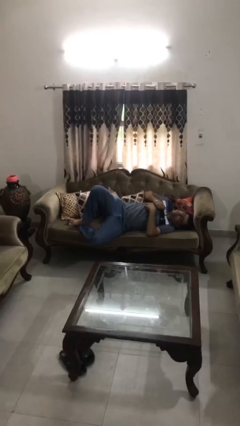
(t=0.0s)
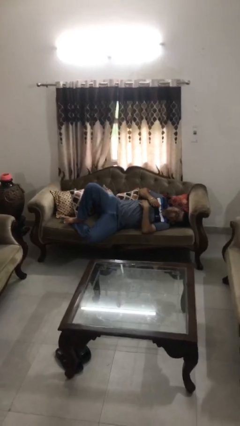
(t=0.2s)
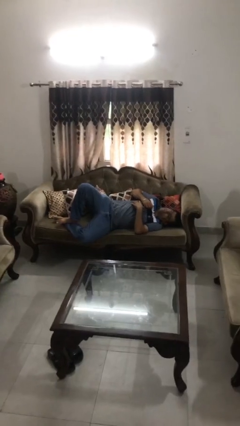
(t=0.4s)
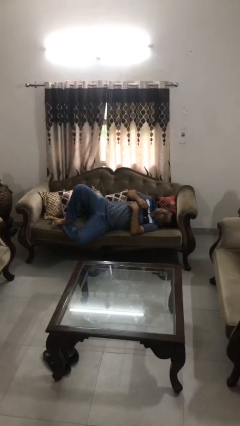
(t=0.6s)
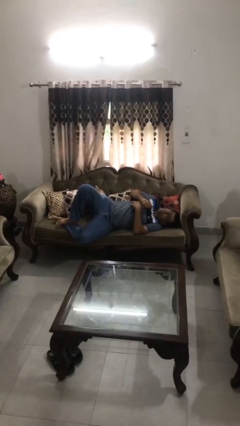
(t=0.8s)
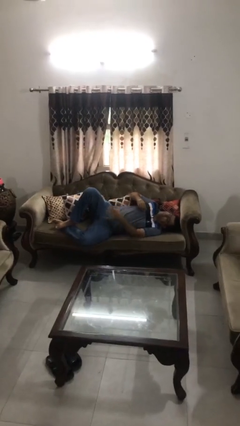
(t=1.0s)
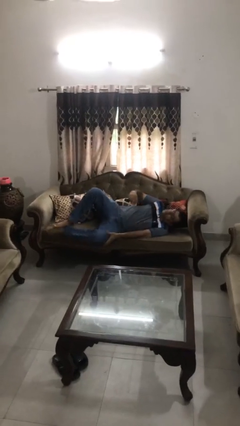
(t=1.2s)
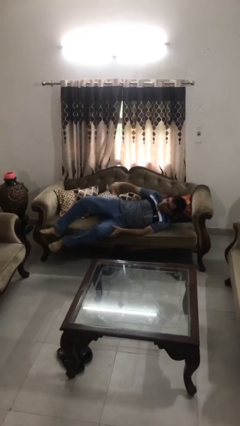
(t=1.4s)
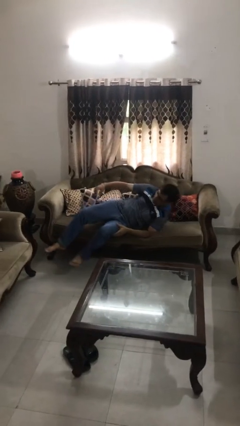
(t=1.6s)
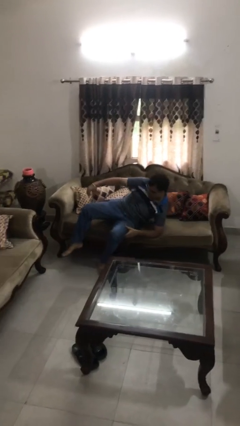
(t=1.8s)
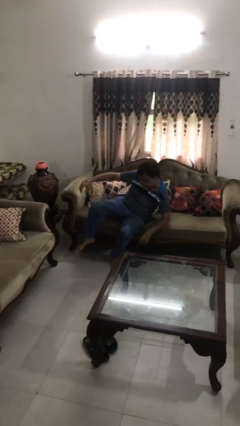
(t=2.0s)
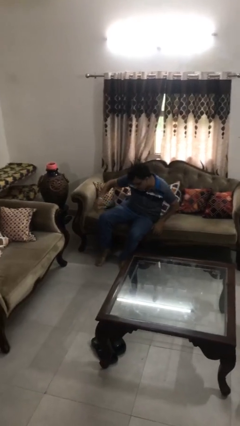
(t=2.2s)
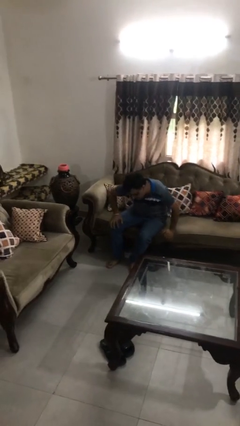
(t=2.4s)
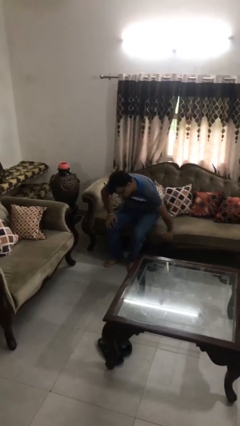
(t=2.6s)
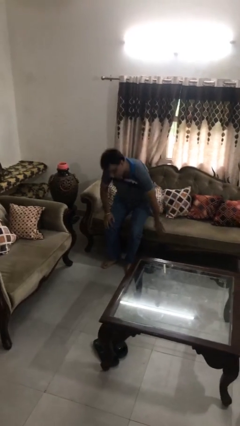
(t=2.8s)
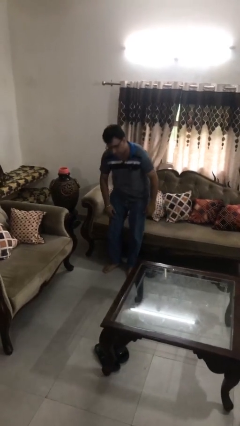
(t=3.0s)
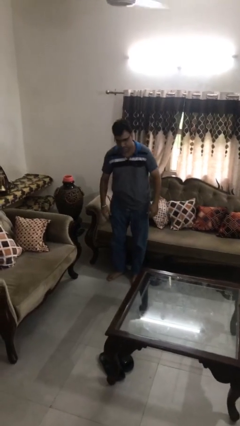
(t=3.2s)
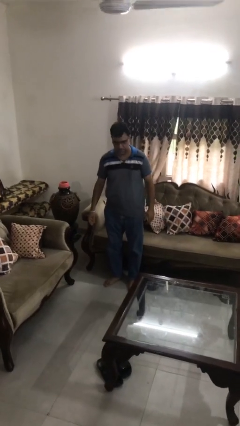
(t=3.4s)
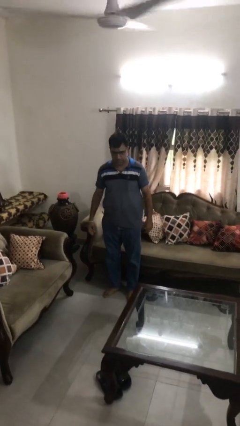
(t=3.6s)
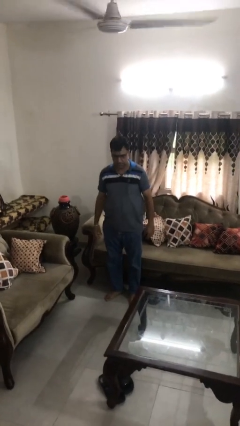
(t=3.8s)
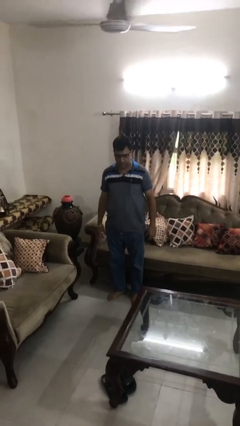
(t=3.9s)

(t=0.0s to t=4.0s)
person stands up

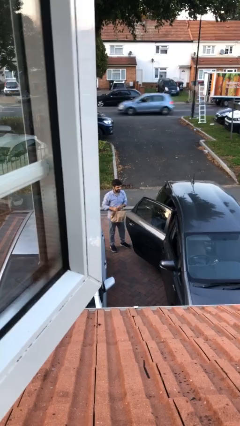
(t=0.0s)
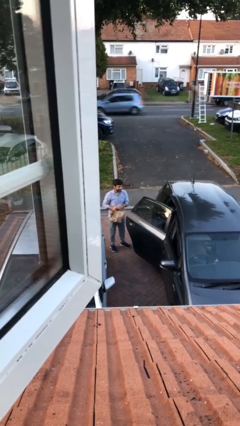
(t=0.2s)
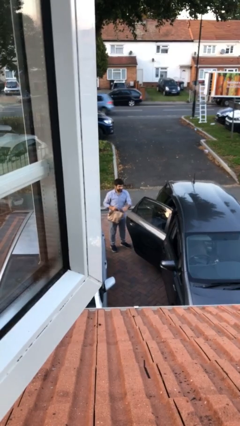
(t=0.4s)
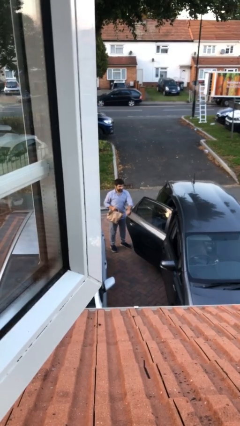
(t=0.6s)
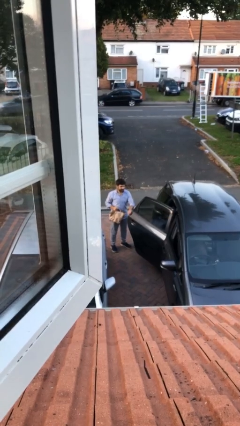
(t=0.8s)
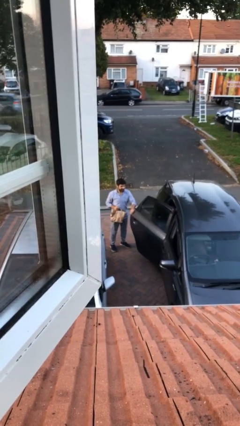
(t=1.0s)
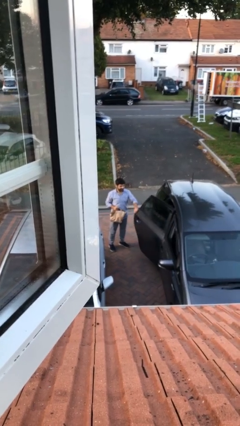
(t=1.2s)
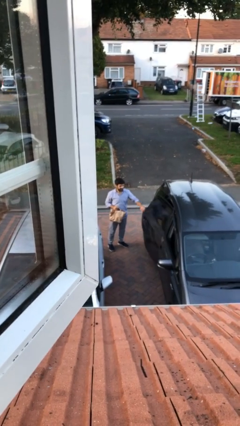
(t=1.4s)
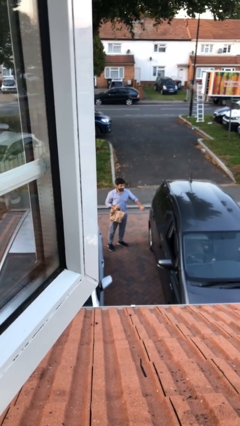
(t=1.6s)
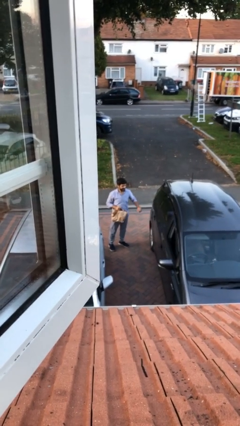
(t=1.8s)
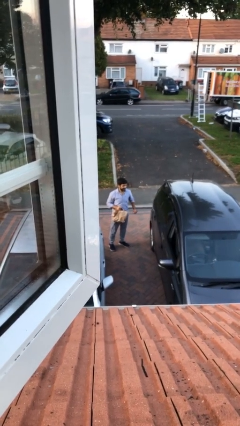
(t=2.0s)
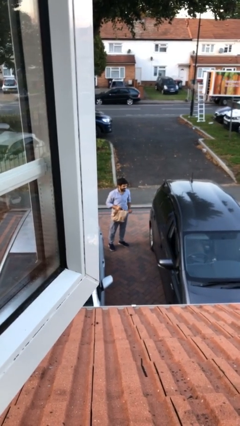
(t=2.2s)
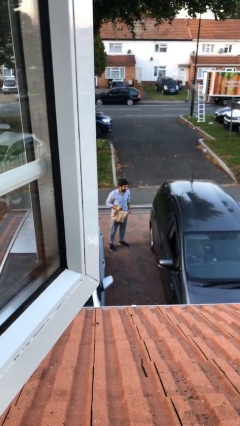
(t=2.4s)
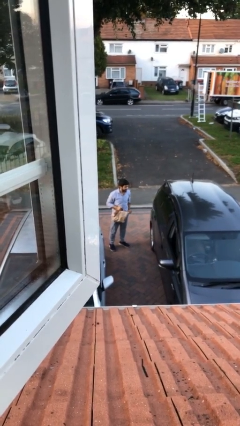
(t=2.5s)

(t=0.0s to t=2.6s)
person closes car door

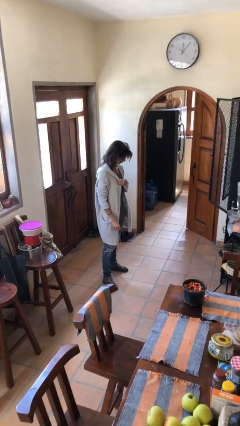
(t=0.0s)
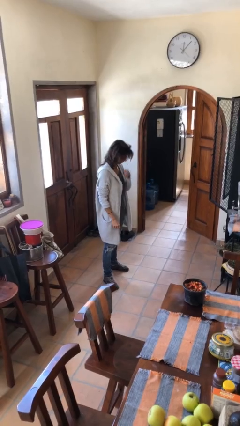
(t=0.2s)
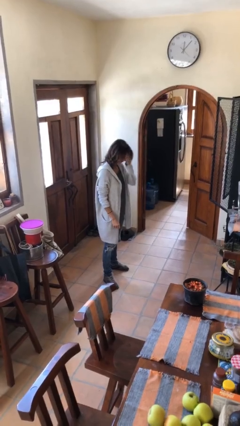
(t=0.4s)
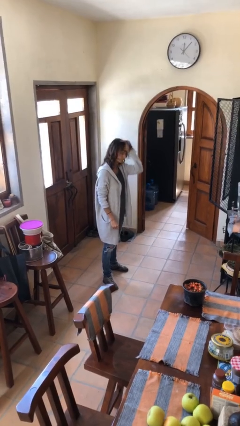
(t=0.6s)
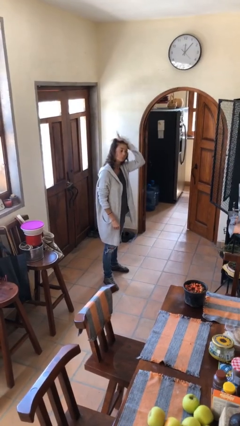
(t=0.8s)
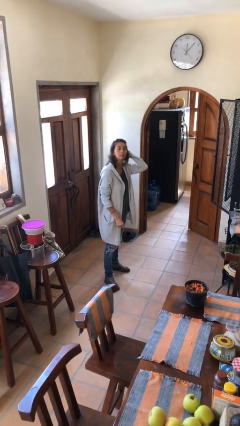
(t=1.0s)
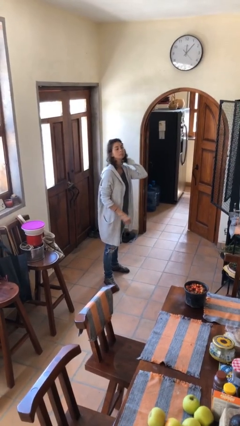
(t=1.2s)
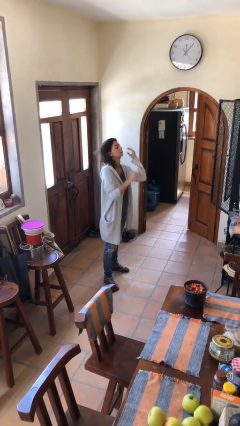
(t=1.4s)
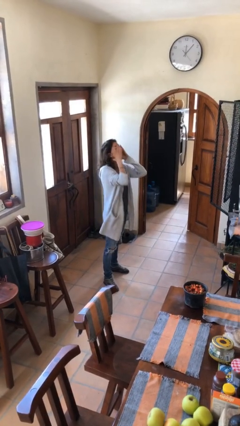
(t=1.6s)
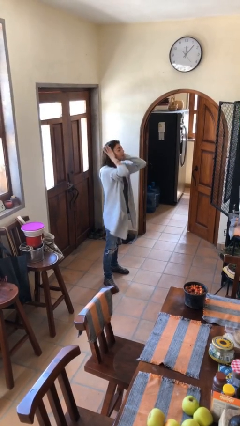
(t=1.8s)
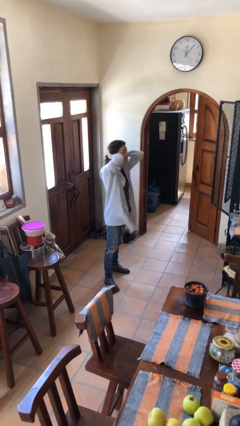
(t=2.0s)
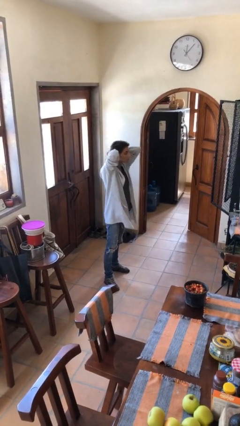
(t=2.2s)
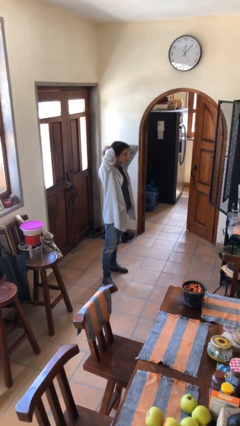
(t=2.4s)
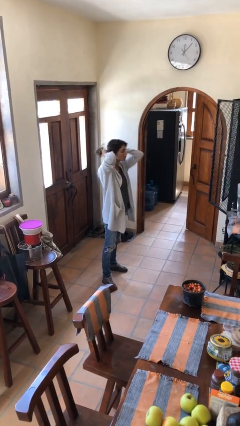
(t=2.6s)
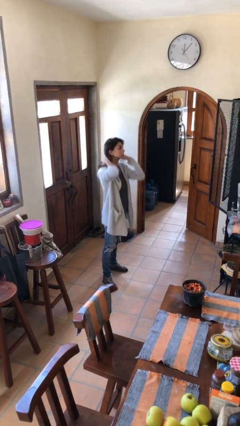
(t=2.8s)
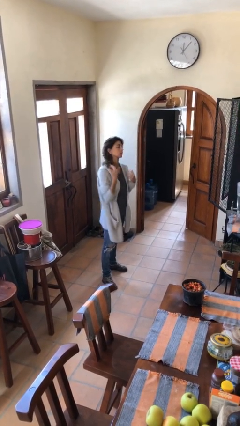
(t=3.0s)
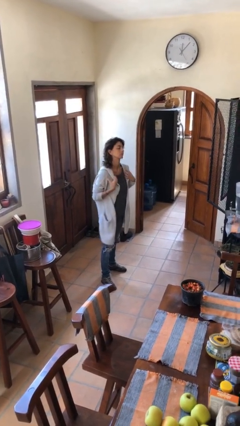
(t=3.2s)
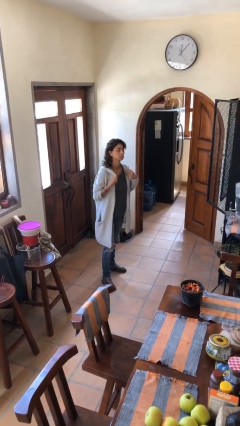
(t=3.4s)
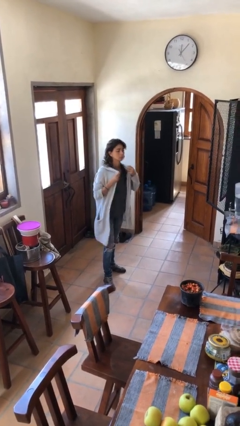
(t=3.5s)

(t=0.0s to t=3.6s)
person strokes hair

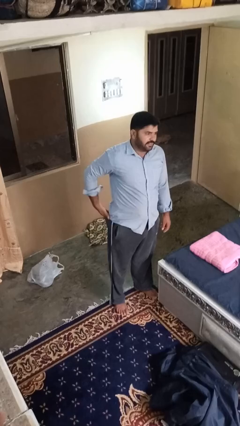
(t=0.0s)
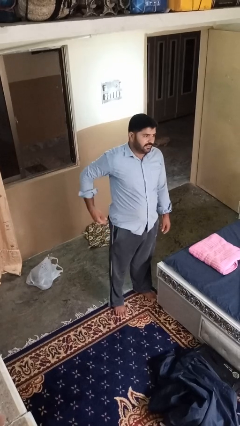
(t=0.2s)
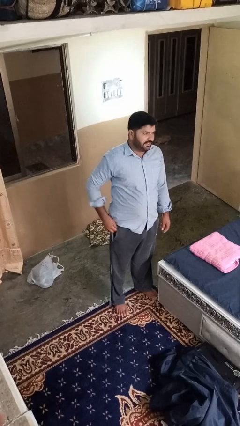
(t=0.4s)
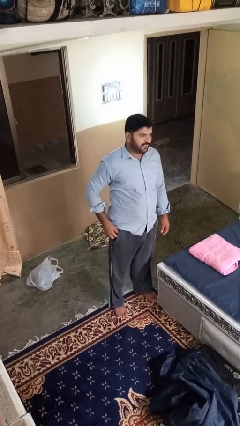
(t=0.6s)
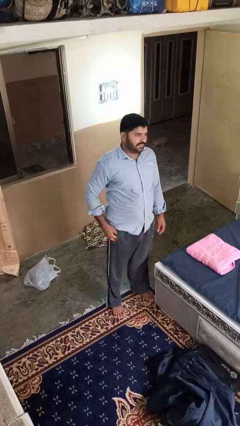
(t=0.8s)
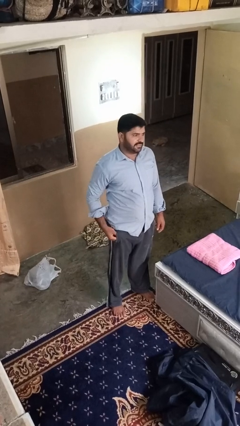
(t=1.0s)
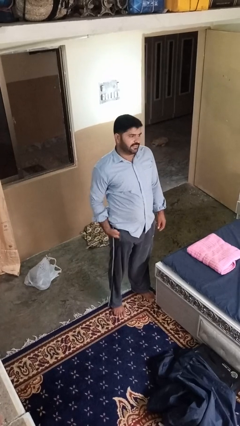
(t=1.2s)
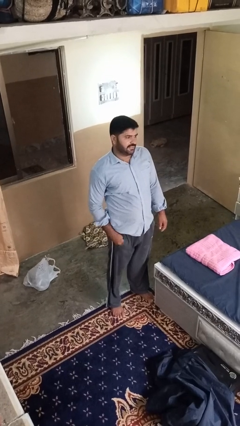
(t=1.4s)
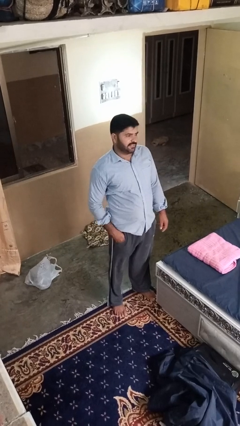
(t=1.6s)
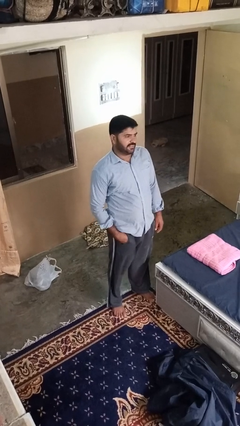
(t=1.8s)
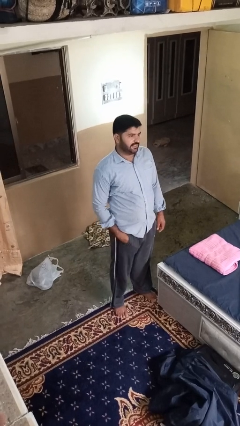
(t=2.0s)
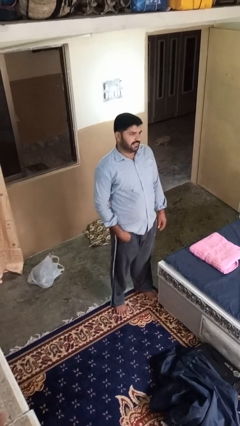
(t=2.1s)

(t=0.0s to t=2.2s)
person puts hands in back pockets

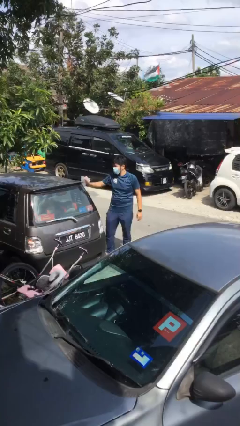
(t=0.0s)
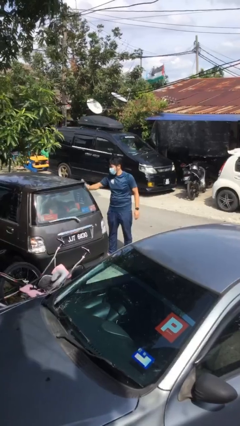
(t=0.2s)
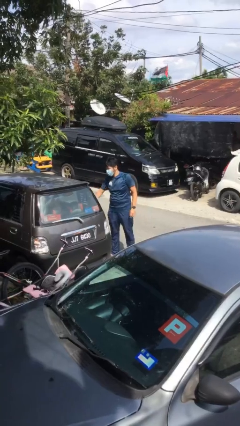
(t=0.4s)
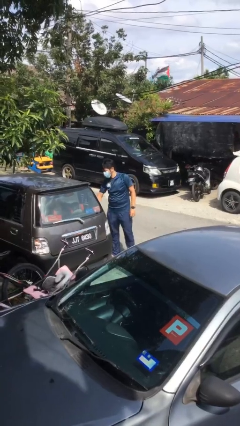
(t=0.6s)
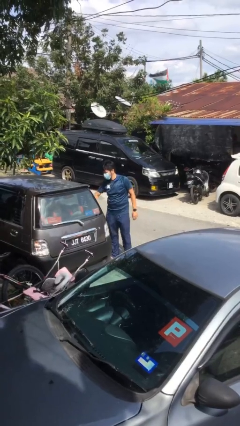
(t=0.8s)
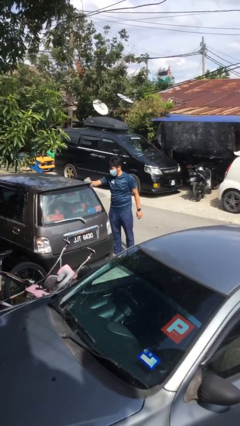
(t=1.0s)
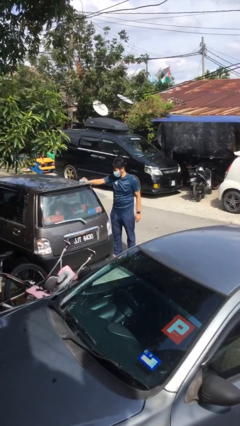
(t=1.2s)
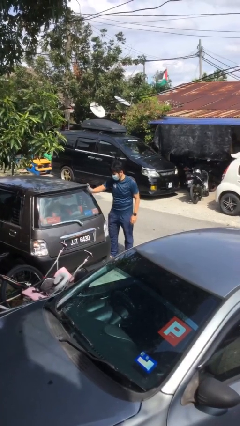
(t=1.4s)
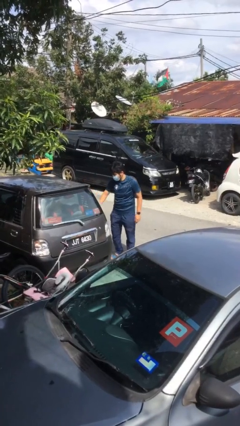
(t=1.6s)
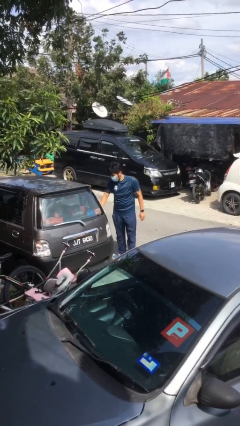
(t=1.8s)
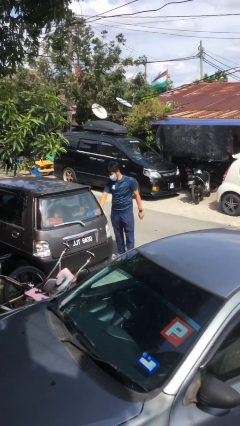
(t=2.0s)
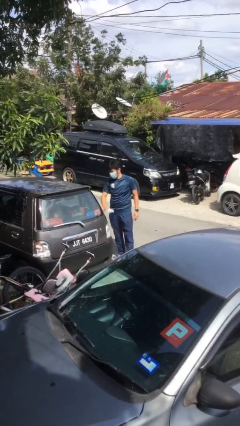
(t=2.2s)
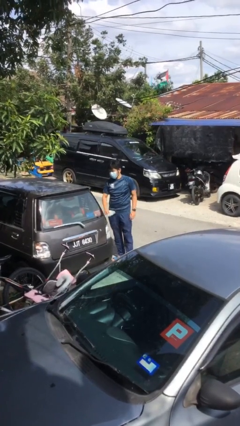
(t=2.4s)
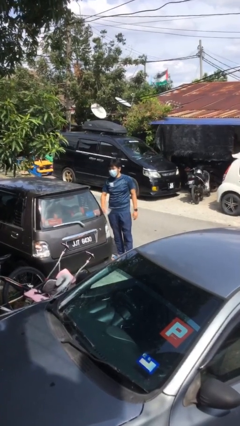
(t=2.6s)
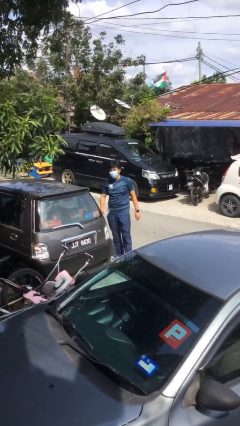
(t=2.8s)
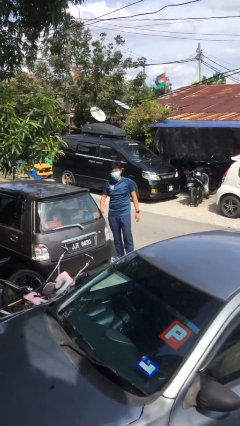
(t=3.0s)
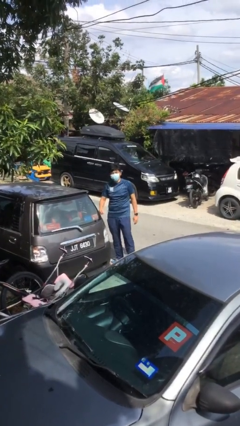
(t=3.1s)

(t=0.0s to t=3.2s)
person polishes car with rag

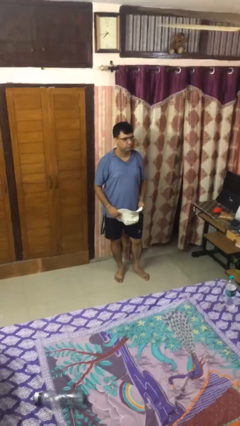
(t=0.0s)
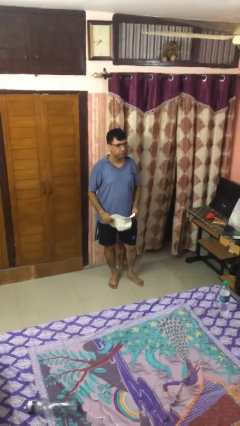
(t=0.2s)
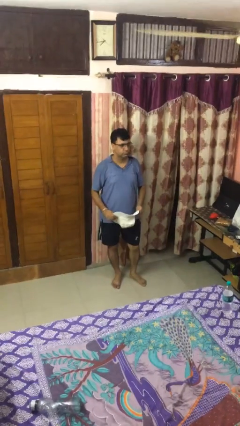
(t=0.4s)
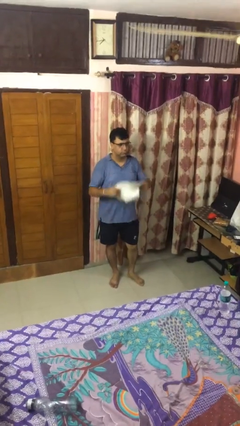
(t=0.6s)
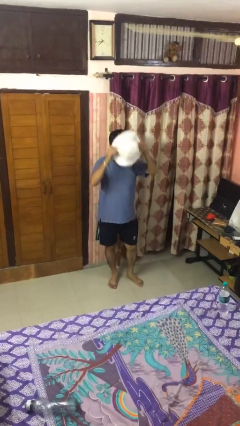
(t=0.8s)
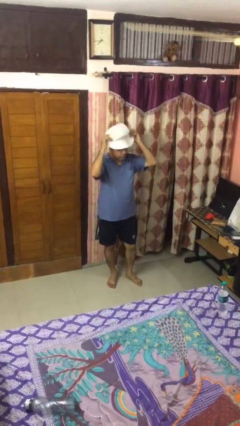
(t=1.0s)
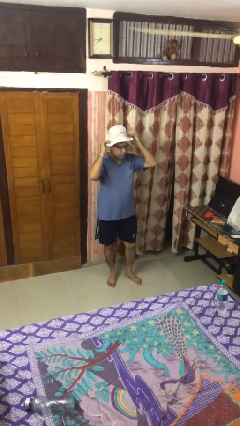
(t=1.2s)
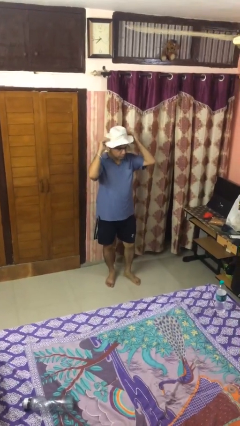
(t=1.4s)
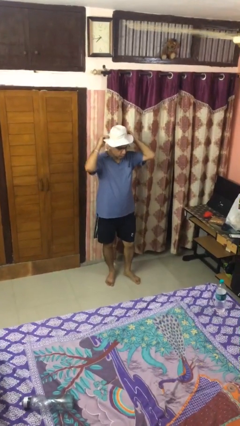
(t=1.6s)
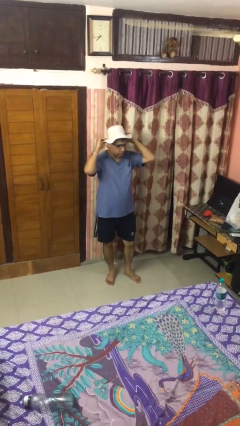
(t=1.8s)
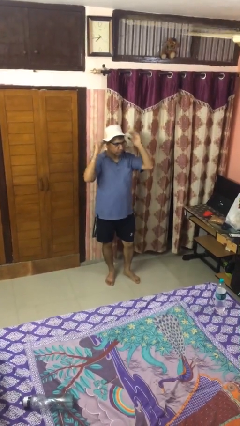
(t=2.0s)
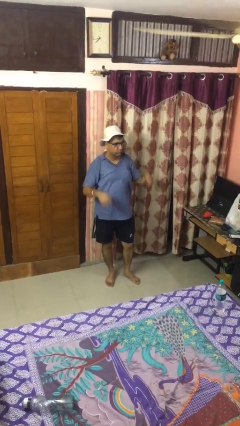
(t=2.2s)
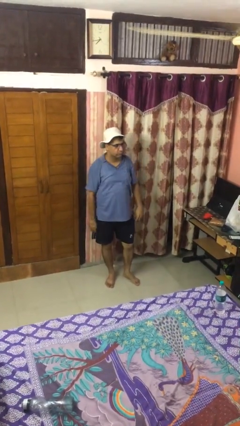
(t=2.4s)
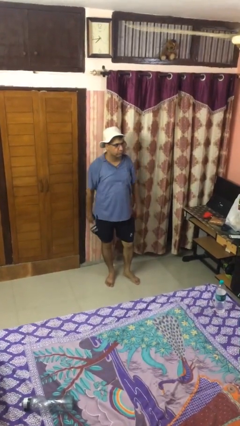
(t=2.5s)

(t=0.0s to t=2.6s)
person puts on hat
